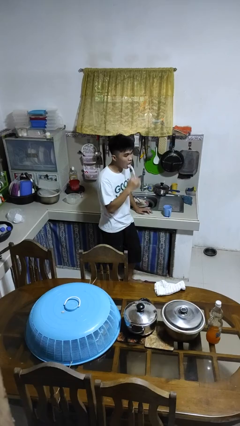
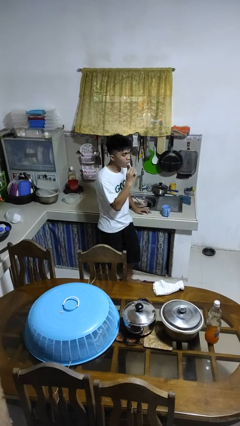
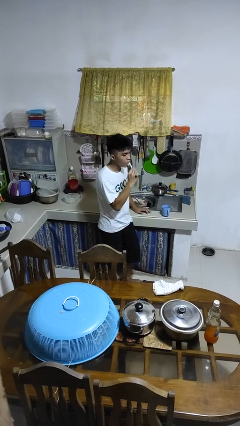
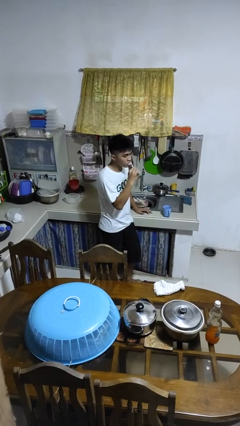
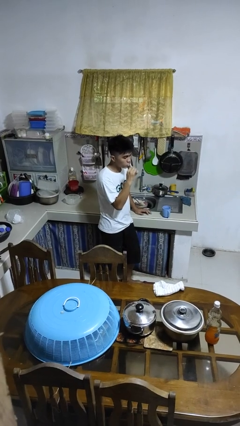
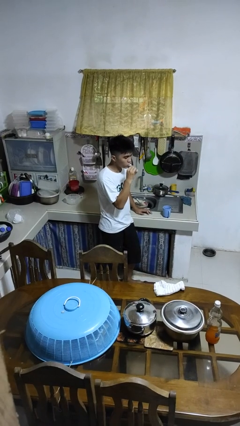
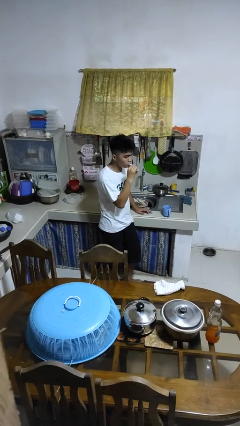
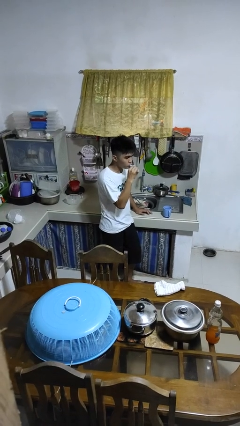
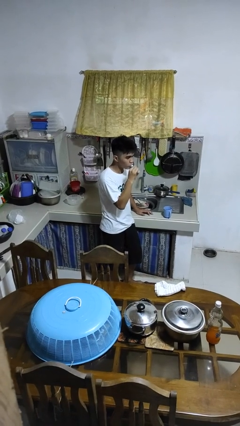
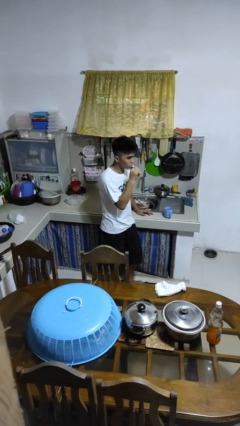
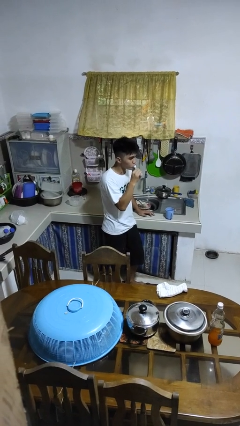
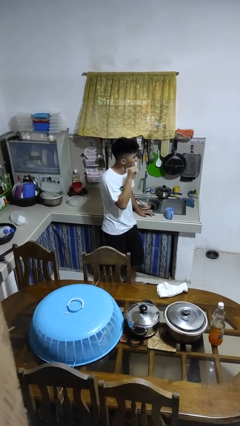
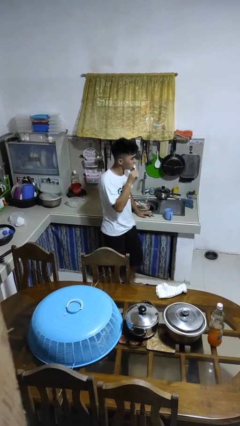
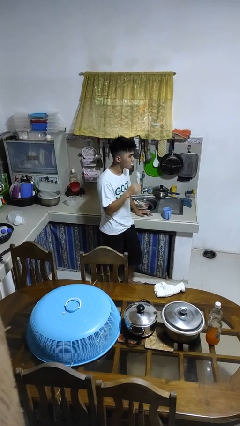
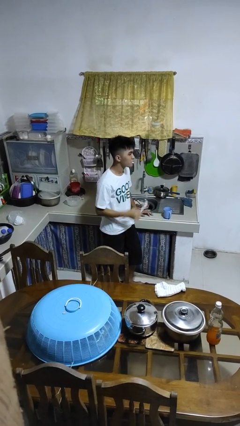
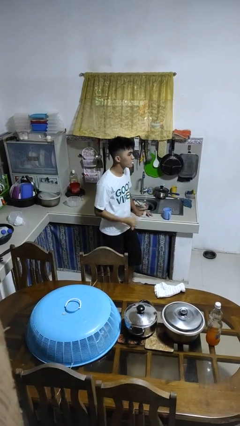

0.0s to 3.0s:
person brushes teeth

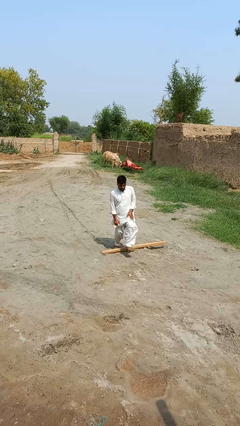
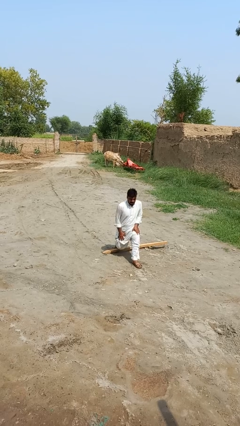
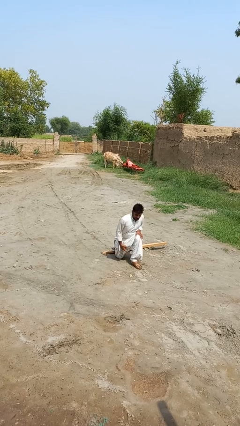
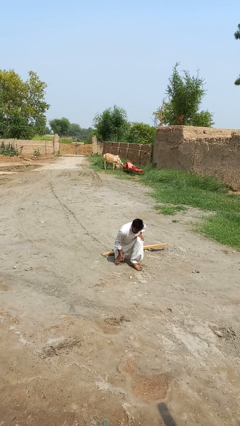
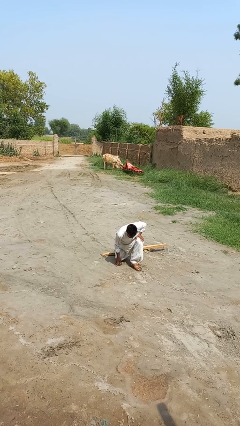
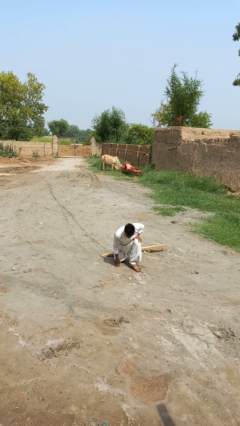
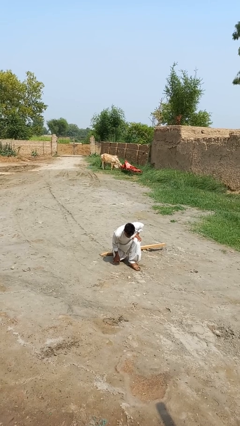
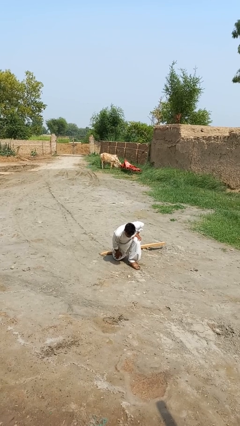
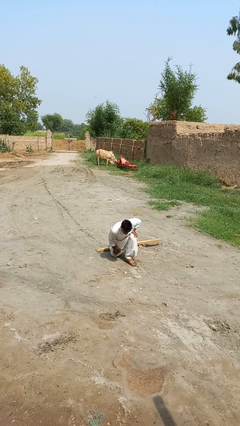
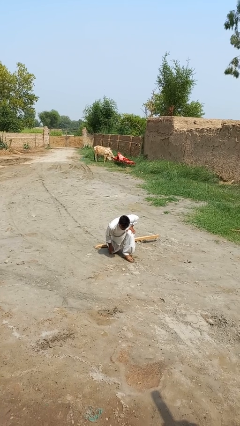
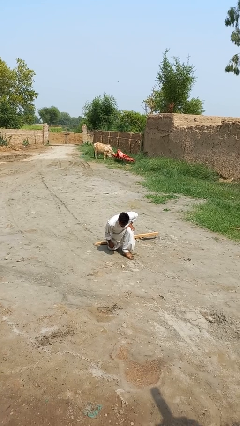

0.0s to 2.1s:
person trips on object on floor

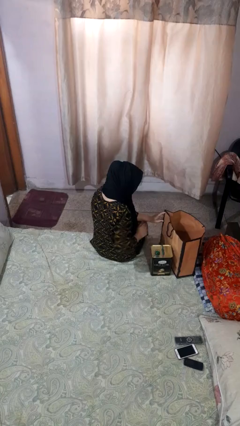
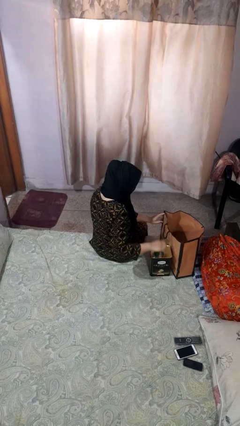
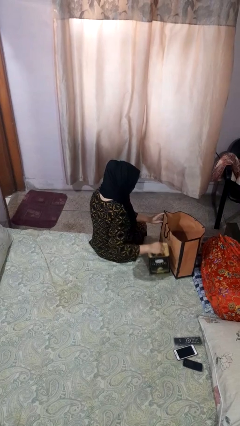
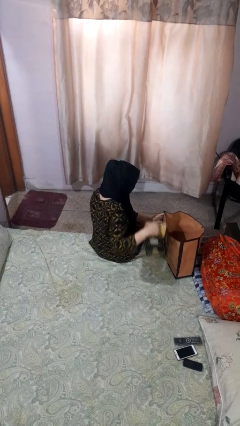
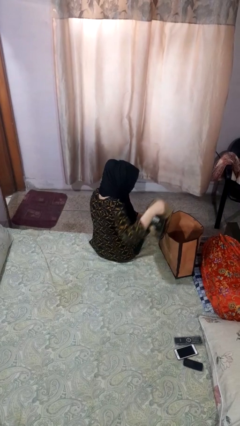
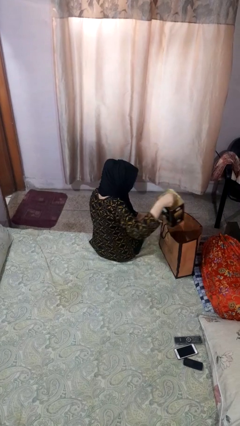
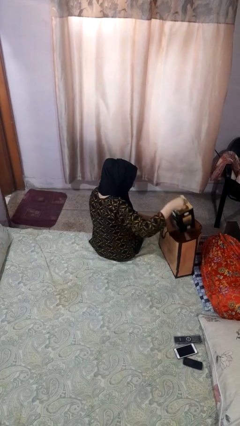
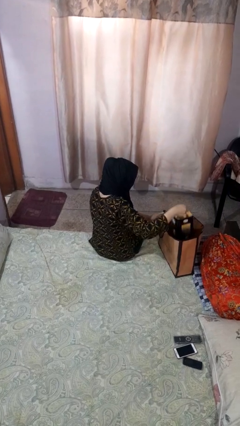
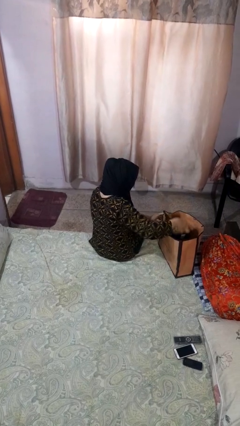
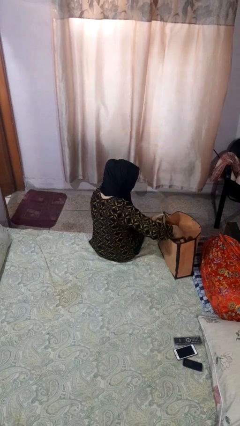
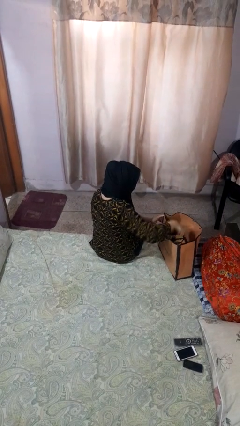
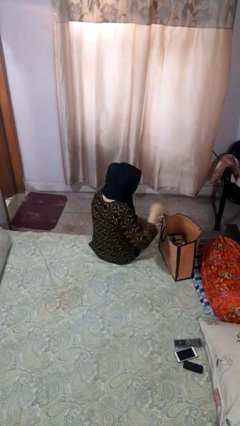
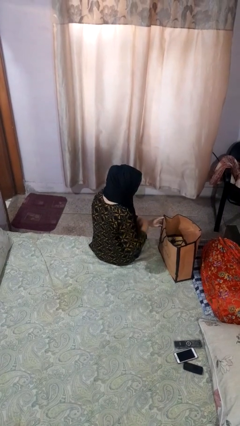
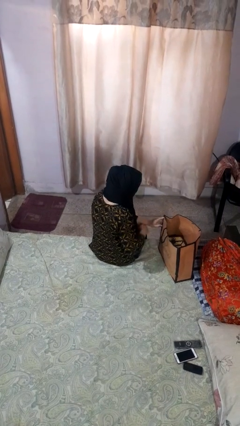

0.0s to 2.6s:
person puts object into bag

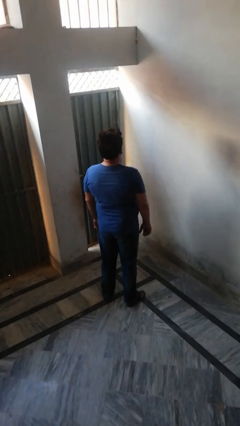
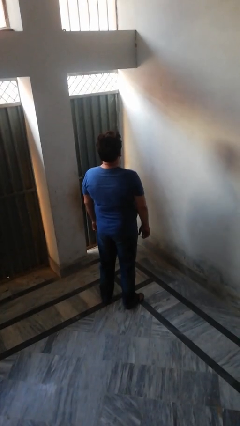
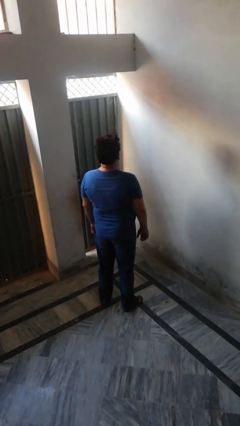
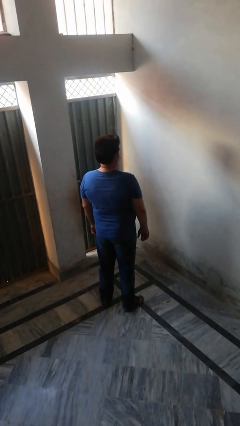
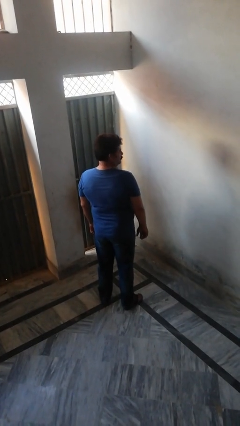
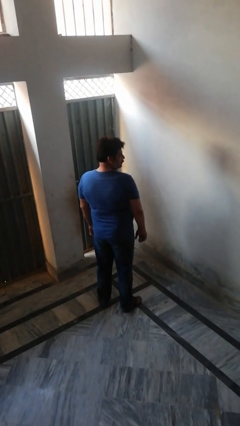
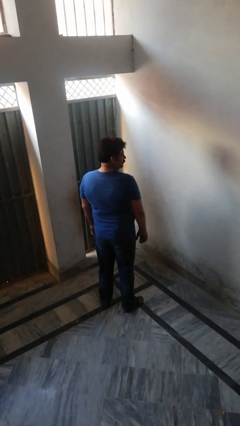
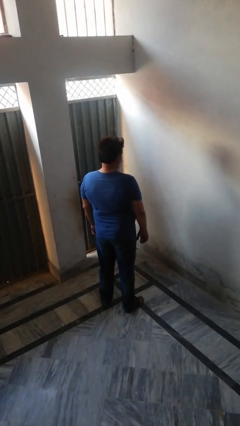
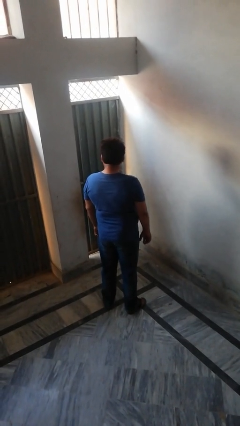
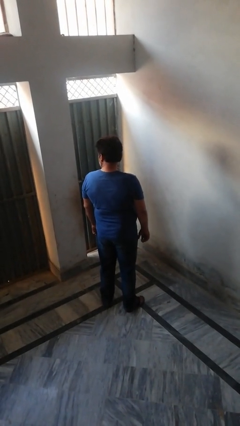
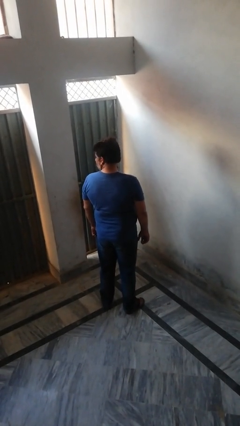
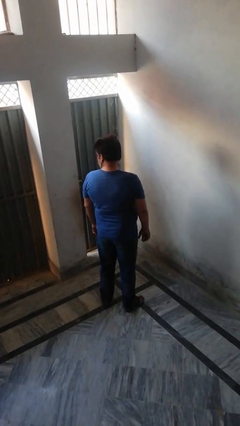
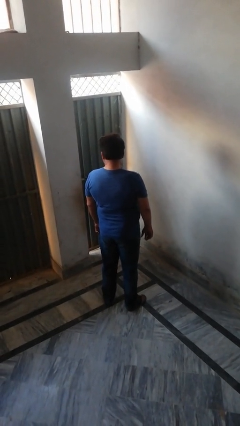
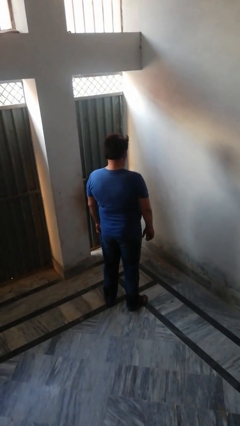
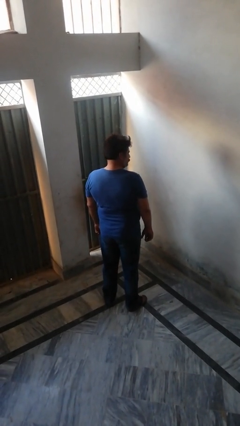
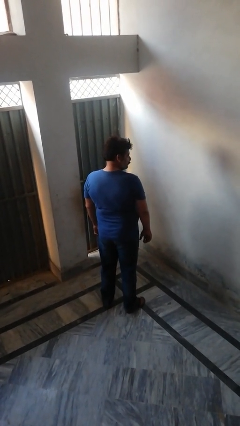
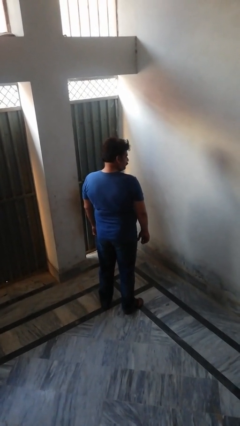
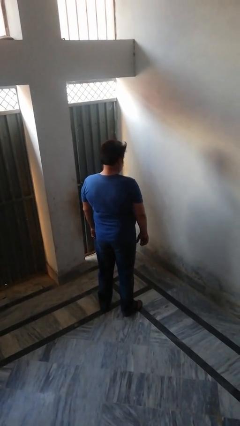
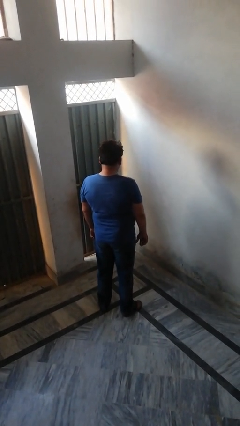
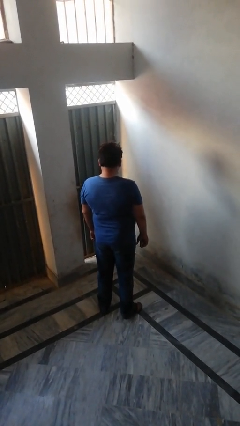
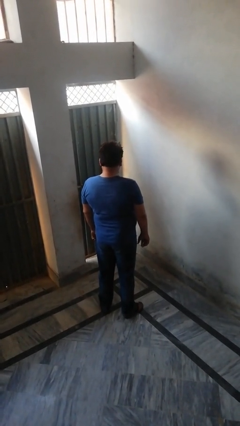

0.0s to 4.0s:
person shakes head

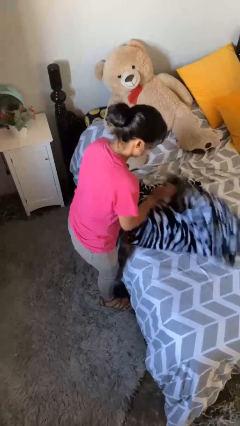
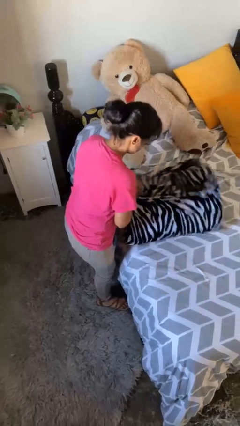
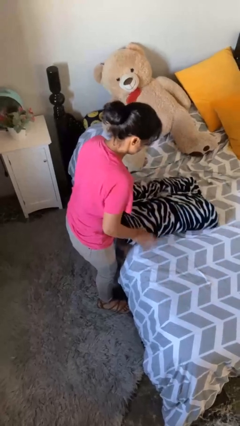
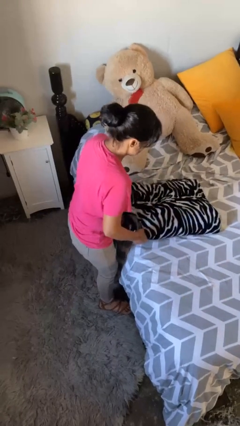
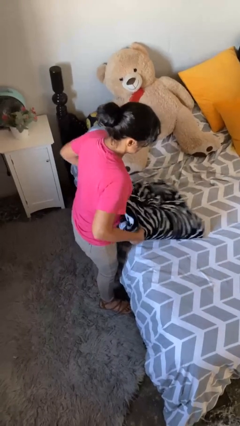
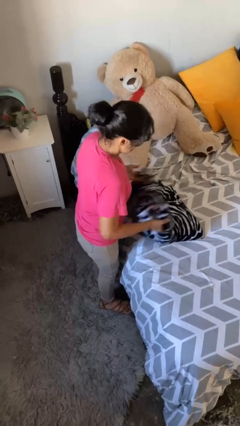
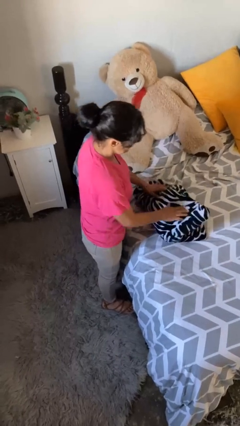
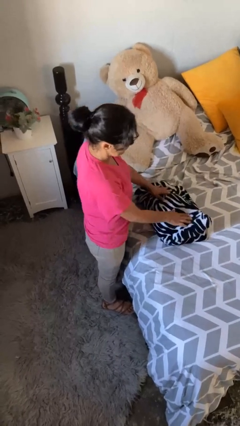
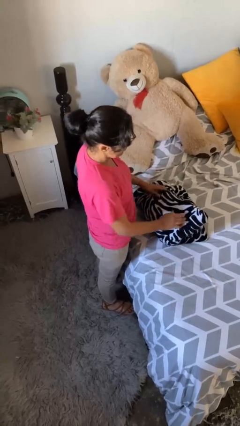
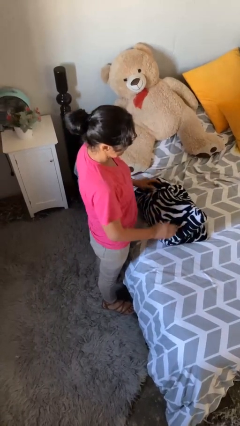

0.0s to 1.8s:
person folds blanket

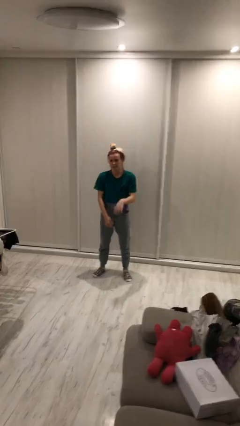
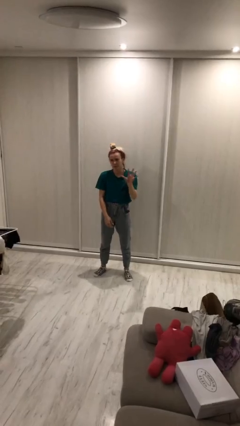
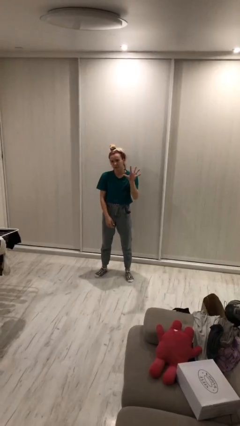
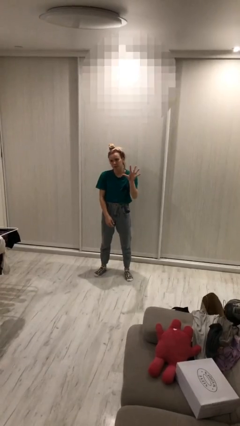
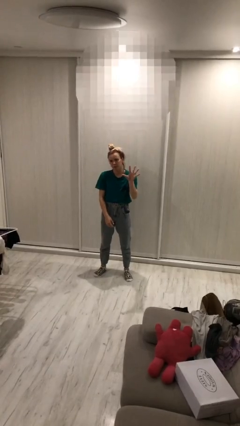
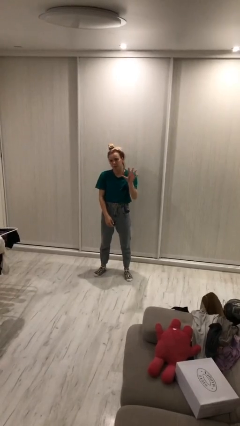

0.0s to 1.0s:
person gestures number five

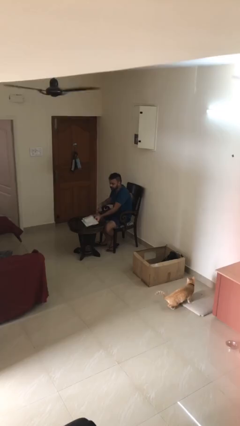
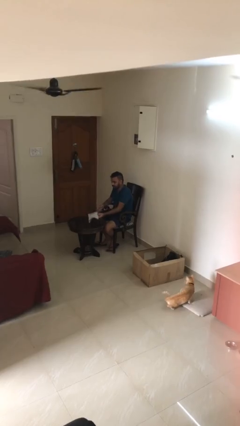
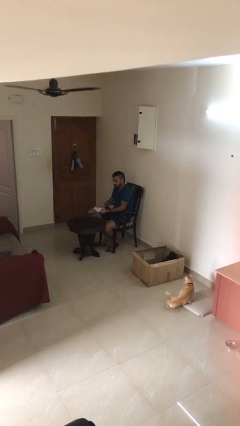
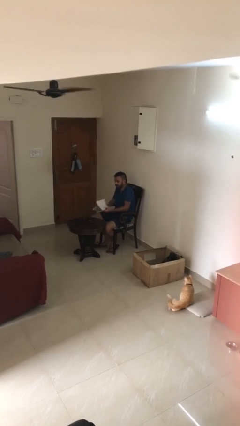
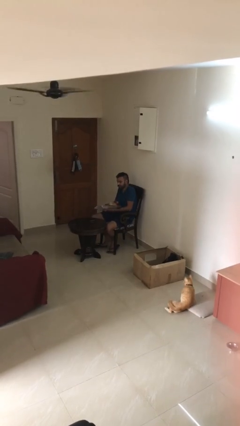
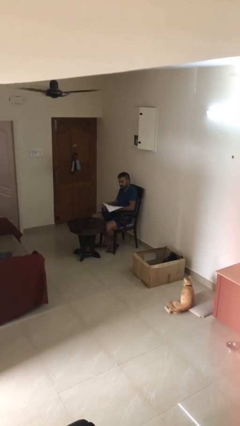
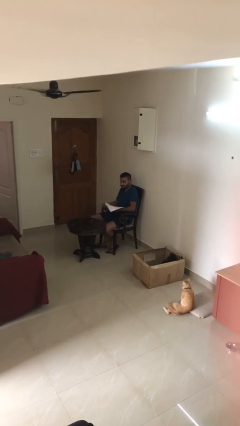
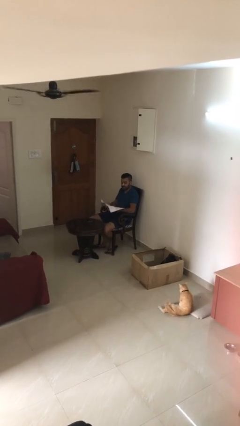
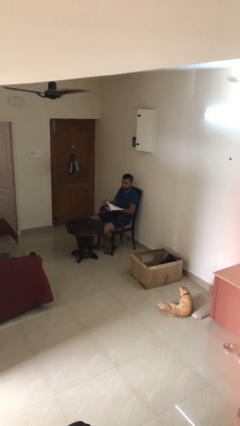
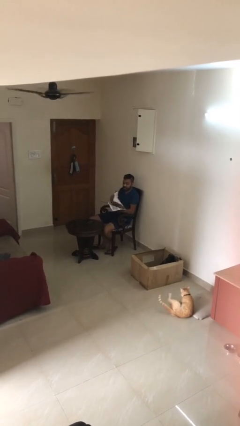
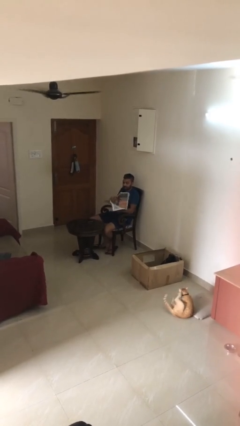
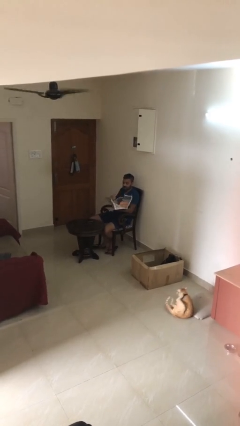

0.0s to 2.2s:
person picks up object from table

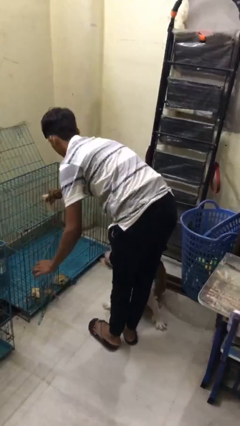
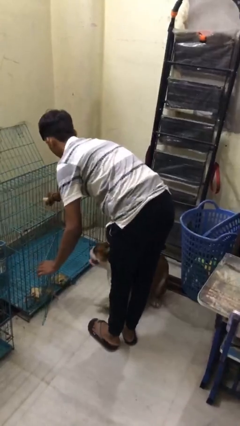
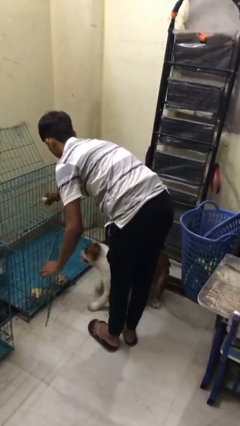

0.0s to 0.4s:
person crates dog
